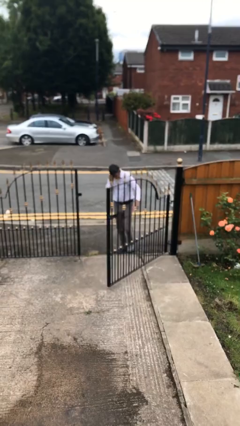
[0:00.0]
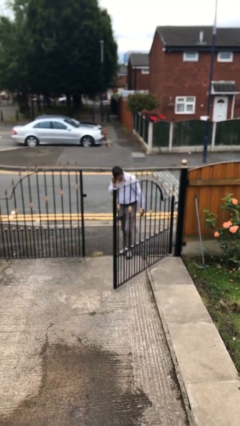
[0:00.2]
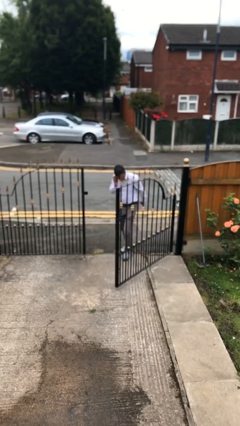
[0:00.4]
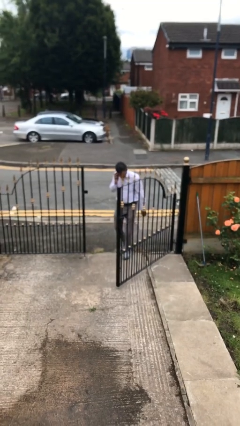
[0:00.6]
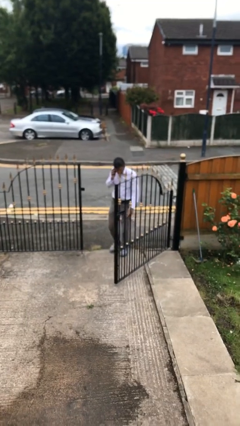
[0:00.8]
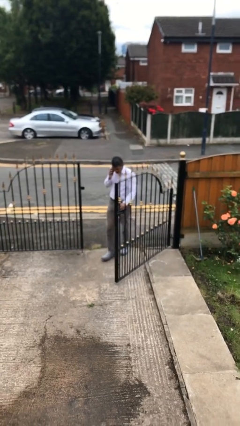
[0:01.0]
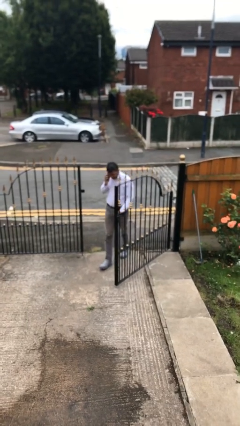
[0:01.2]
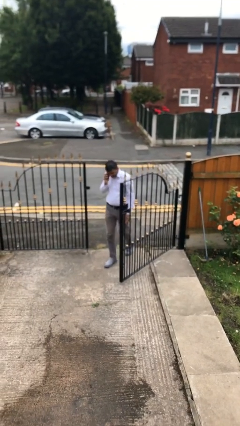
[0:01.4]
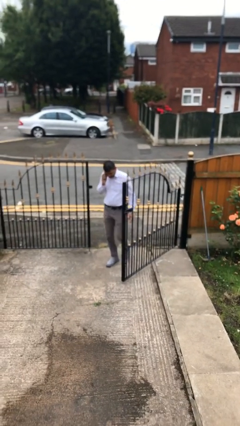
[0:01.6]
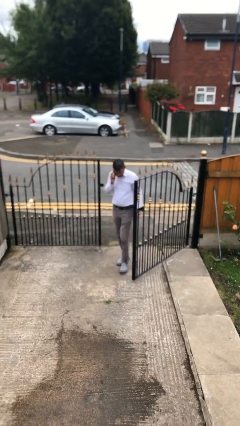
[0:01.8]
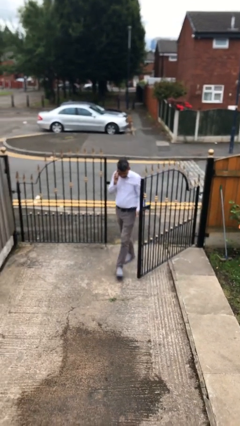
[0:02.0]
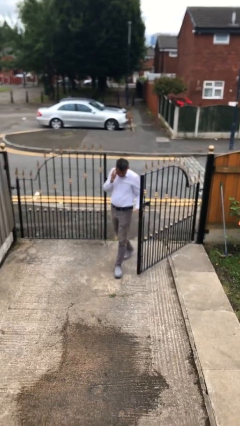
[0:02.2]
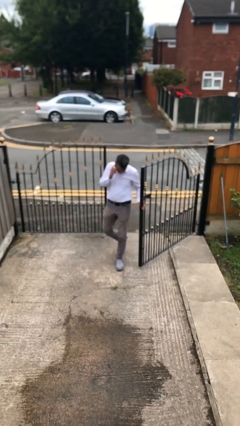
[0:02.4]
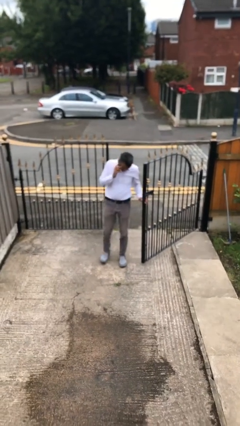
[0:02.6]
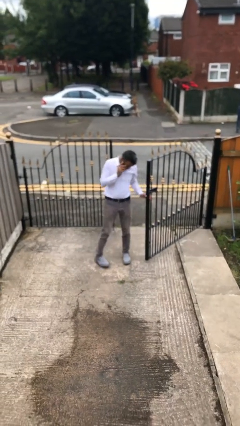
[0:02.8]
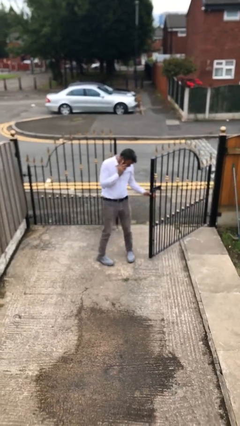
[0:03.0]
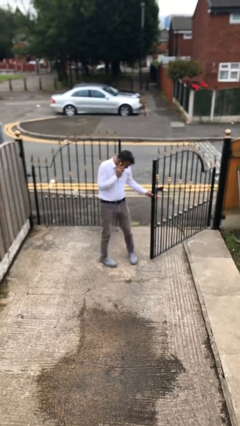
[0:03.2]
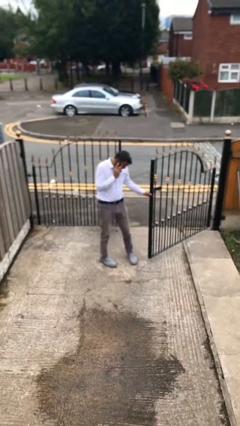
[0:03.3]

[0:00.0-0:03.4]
person enters scene through structure

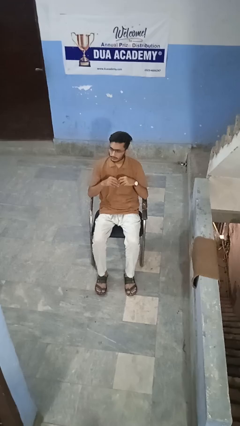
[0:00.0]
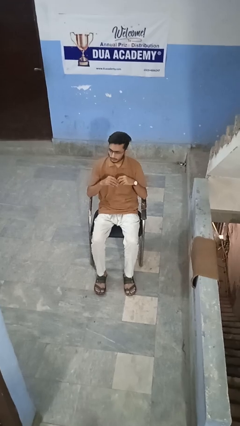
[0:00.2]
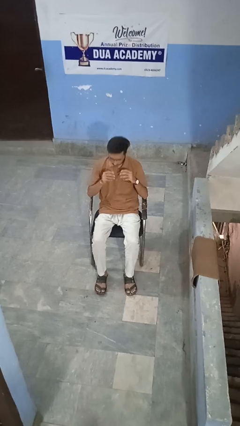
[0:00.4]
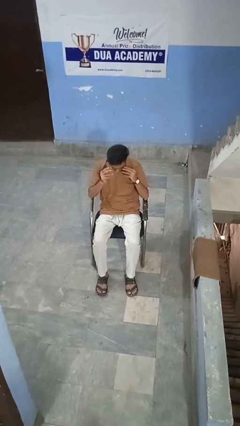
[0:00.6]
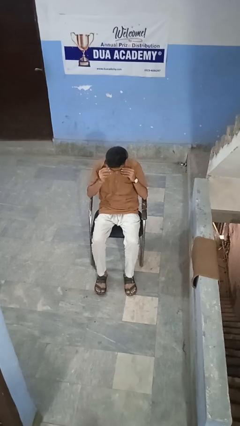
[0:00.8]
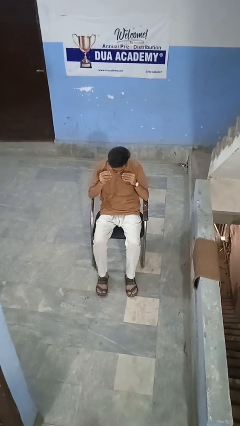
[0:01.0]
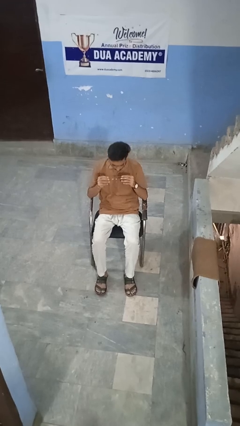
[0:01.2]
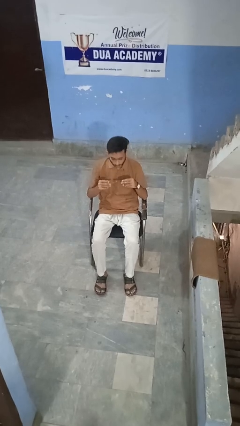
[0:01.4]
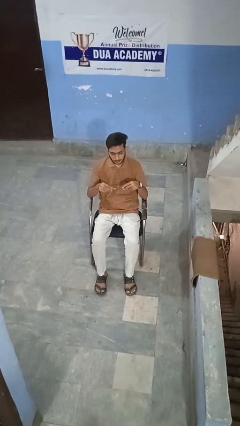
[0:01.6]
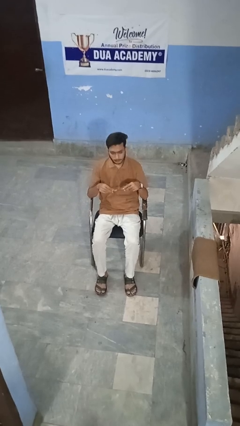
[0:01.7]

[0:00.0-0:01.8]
person takes off glasses

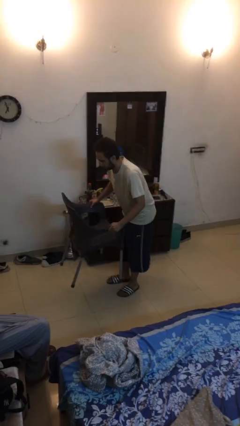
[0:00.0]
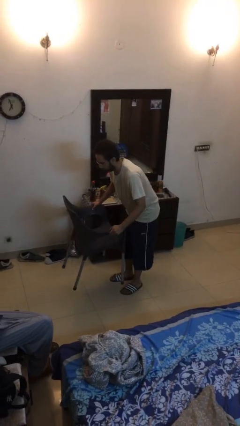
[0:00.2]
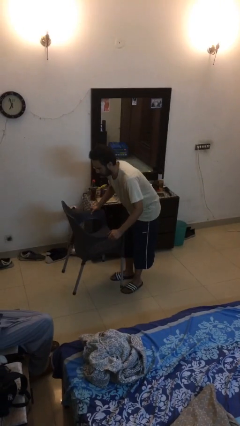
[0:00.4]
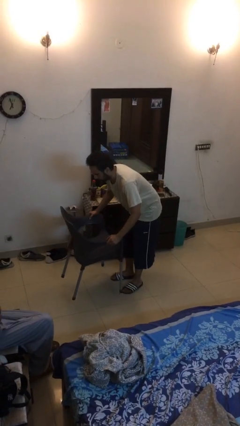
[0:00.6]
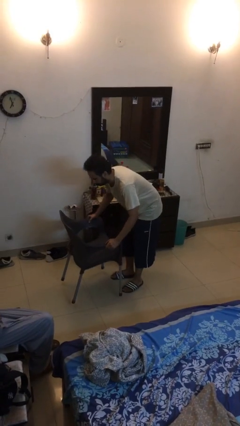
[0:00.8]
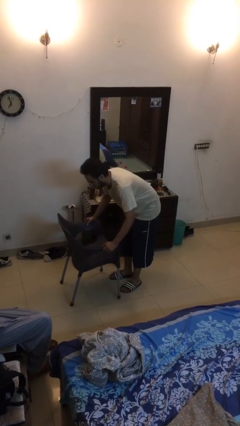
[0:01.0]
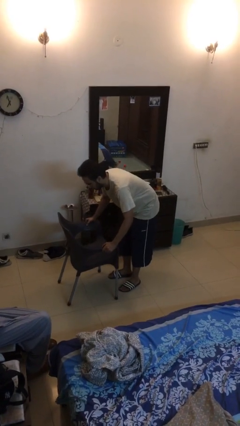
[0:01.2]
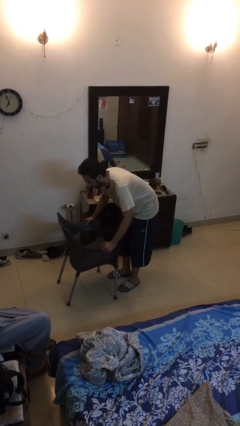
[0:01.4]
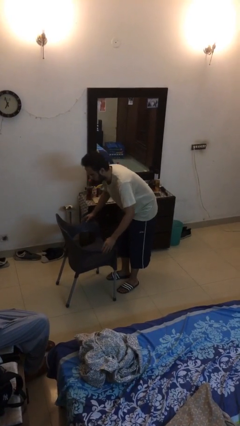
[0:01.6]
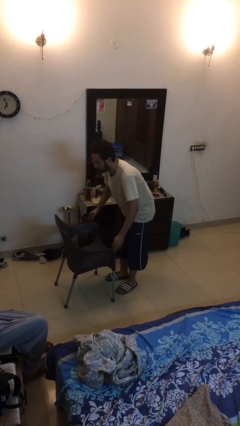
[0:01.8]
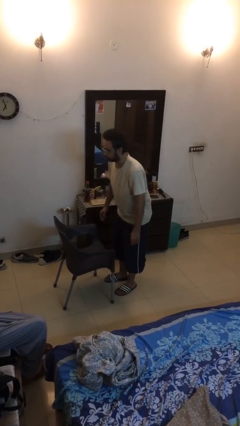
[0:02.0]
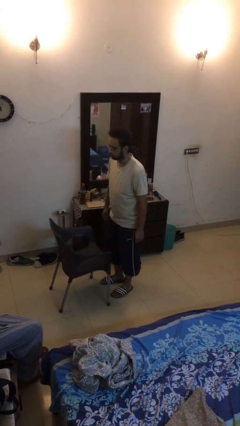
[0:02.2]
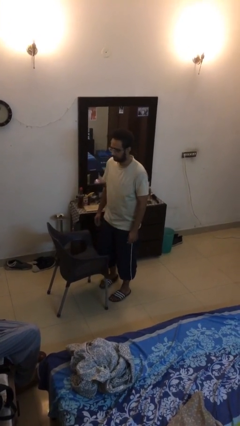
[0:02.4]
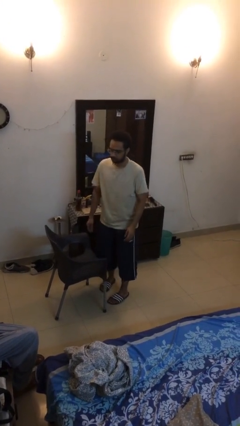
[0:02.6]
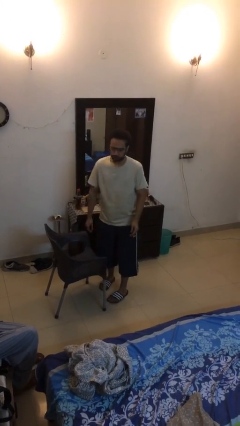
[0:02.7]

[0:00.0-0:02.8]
person puts down object on floor

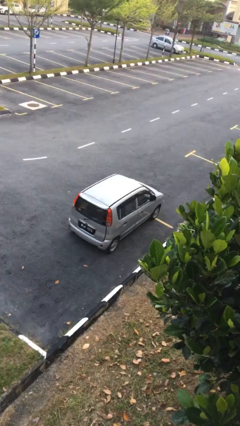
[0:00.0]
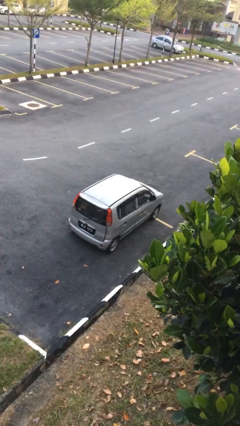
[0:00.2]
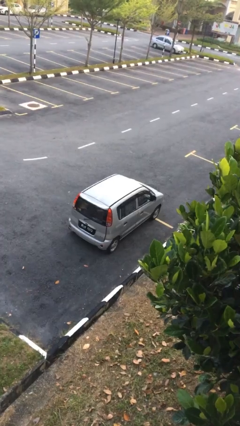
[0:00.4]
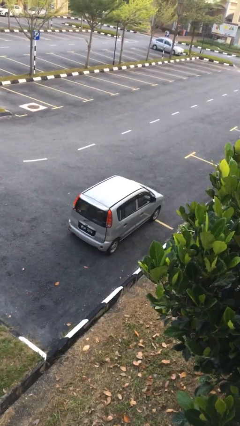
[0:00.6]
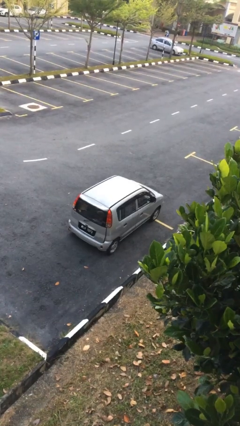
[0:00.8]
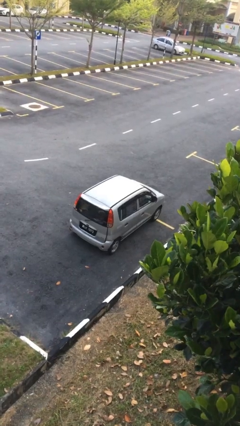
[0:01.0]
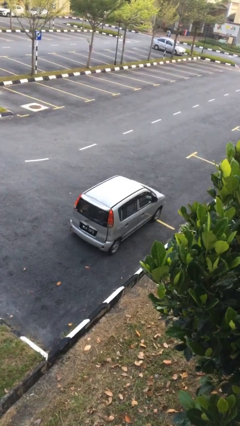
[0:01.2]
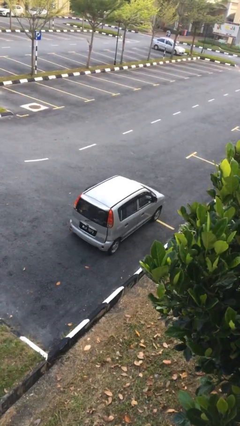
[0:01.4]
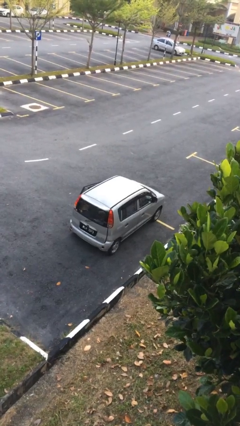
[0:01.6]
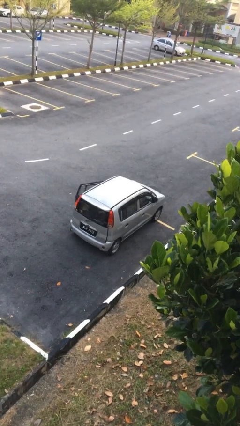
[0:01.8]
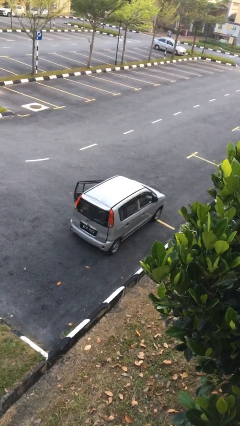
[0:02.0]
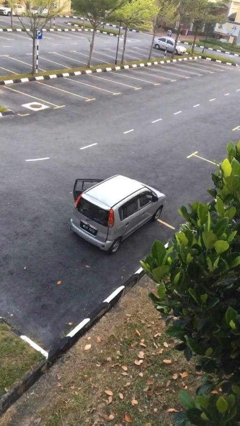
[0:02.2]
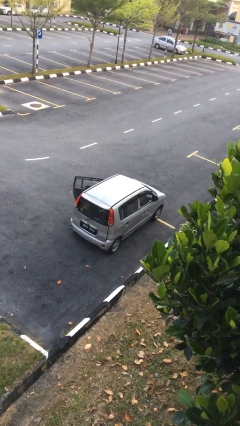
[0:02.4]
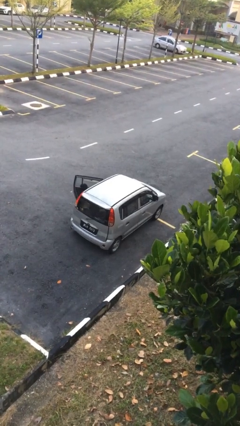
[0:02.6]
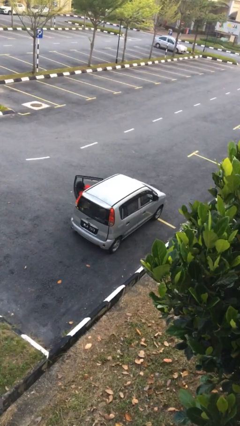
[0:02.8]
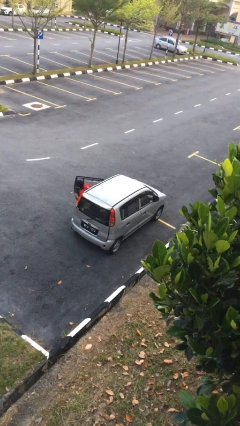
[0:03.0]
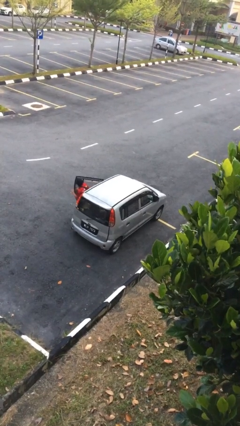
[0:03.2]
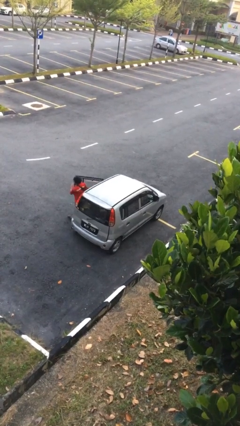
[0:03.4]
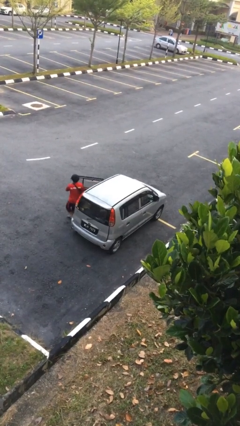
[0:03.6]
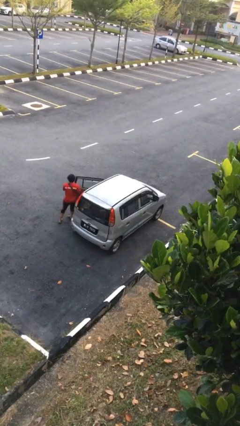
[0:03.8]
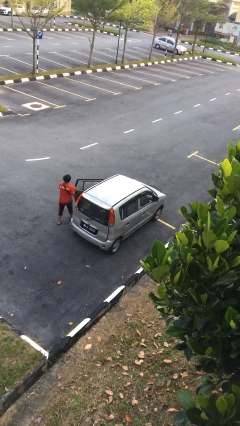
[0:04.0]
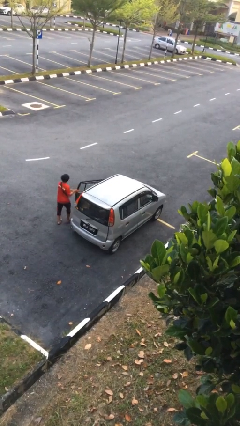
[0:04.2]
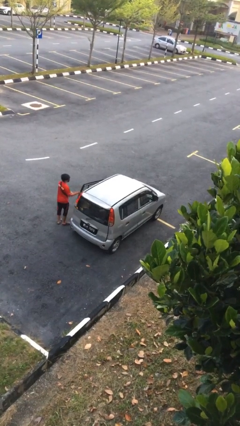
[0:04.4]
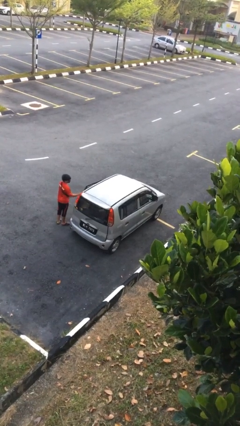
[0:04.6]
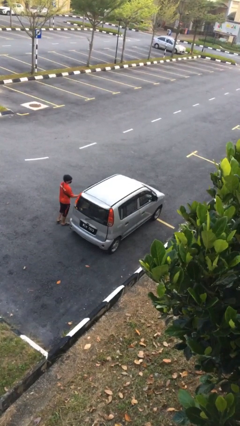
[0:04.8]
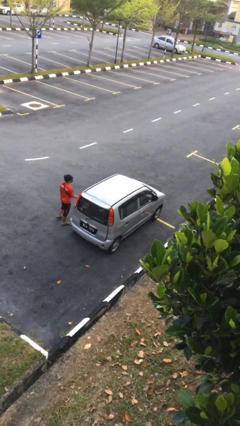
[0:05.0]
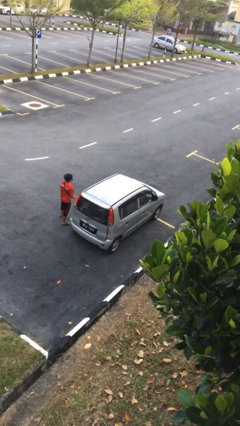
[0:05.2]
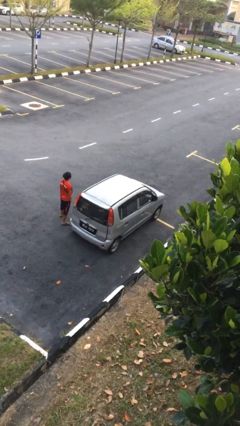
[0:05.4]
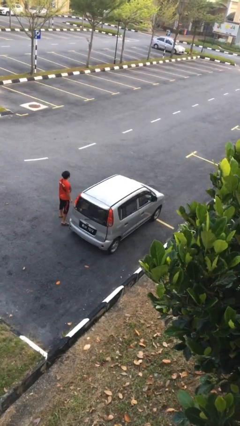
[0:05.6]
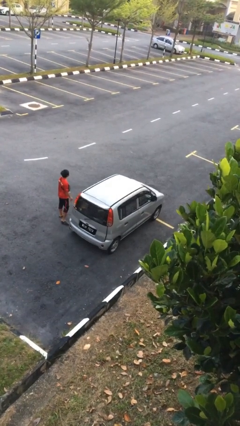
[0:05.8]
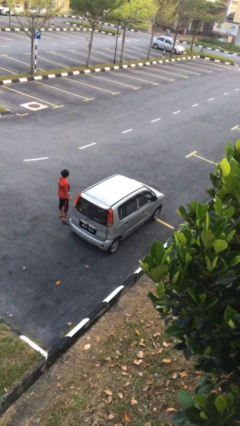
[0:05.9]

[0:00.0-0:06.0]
car drops off person

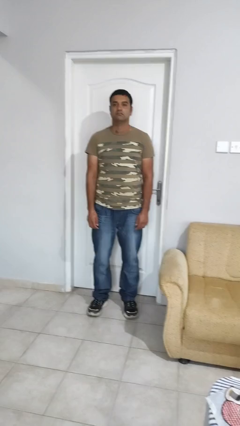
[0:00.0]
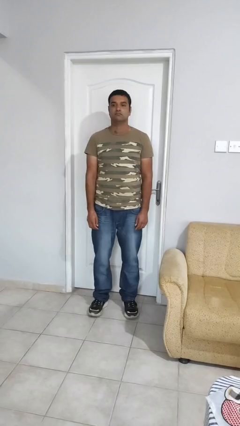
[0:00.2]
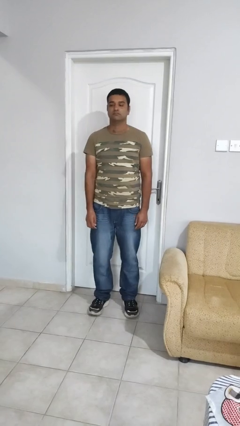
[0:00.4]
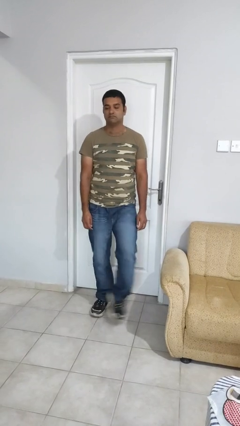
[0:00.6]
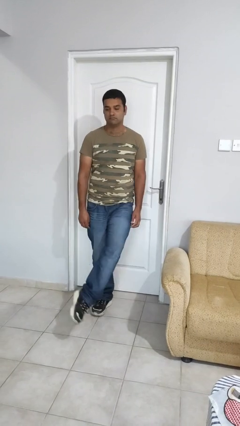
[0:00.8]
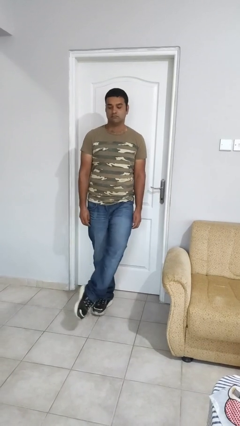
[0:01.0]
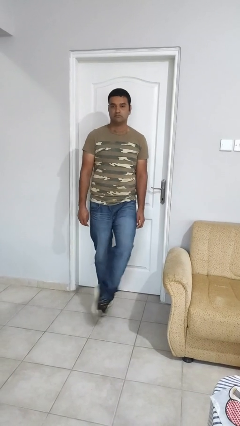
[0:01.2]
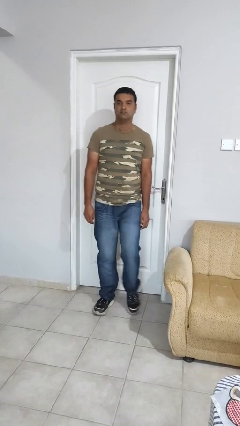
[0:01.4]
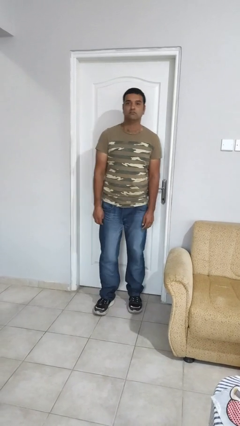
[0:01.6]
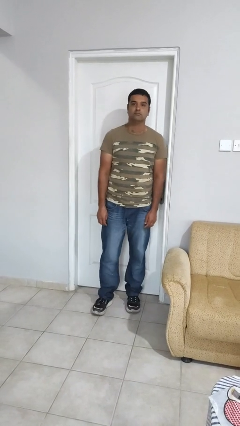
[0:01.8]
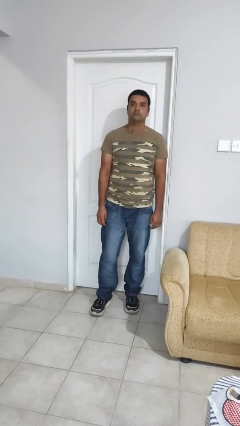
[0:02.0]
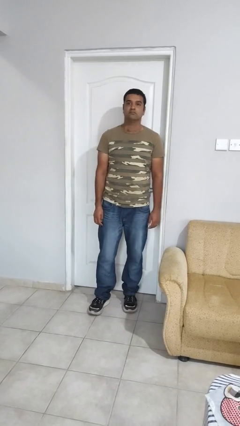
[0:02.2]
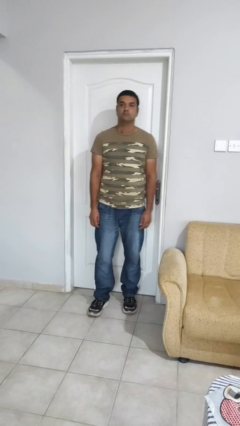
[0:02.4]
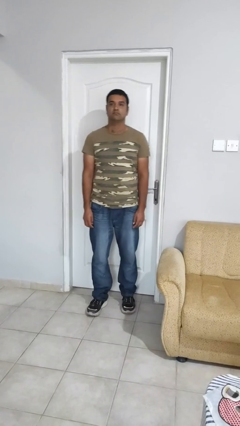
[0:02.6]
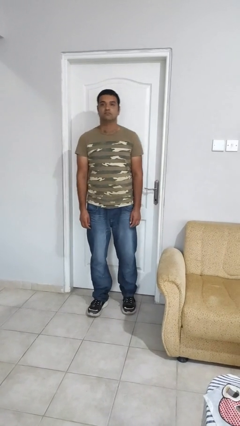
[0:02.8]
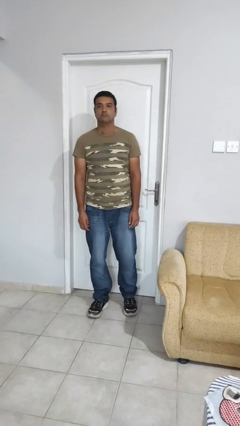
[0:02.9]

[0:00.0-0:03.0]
person karate kicks

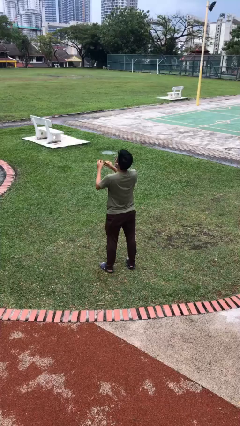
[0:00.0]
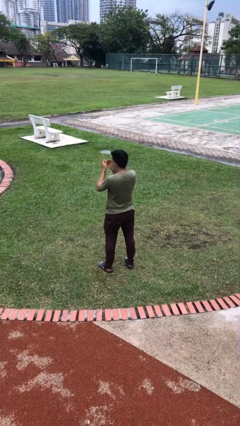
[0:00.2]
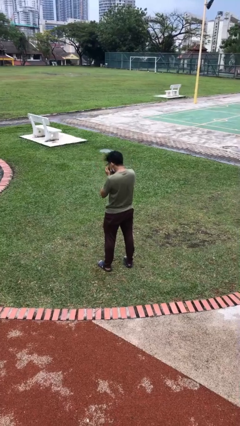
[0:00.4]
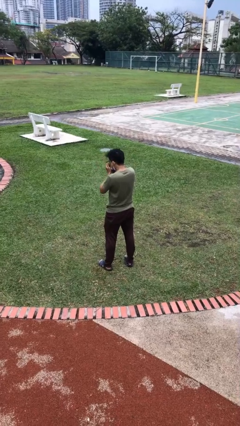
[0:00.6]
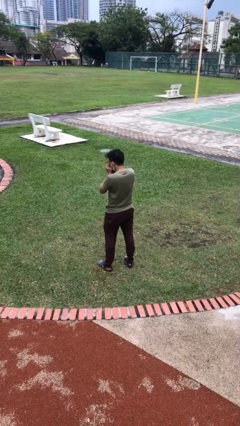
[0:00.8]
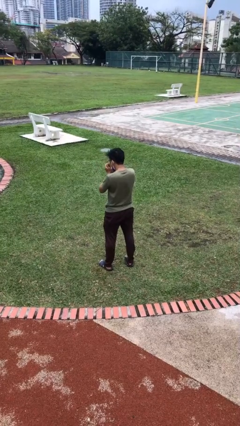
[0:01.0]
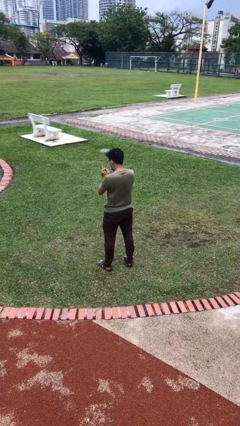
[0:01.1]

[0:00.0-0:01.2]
person sneezes into hand
